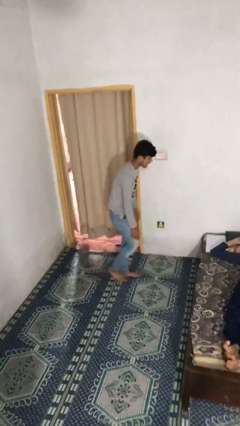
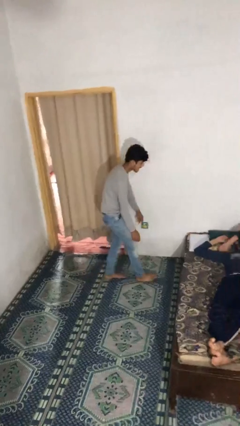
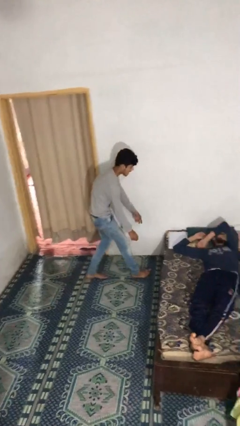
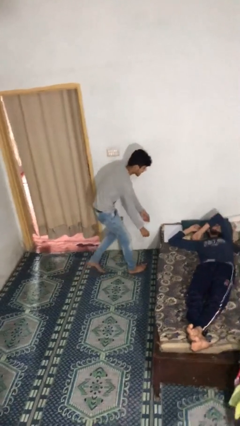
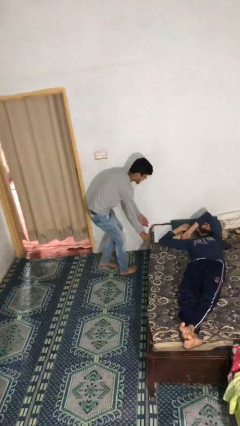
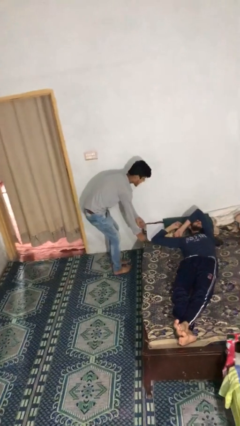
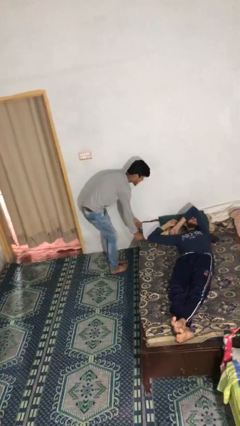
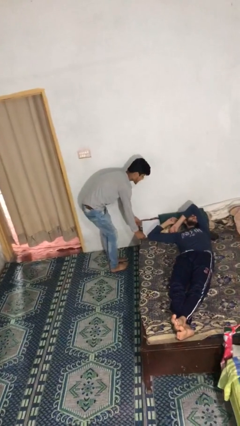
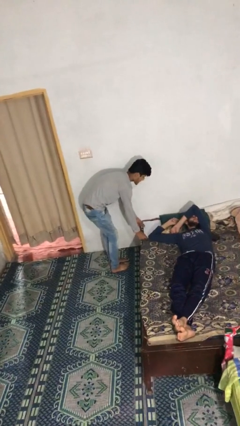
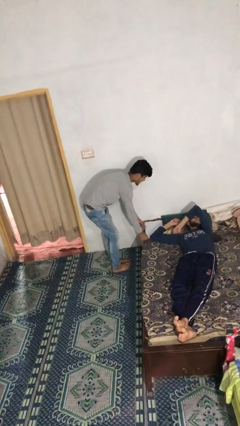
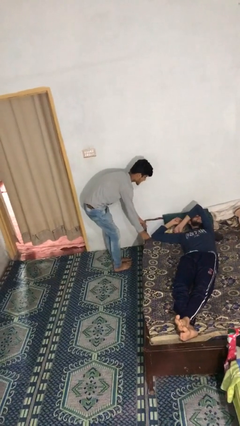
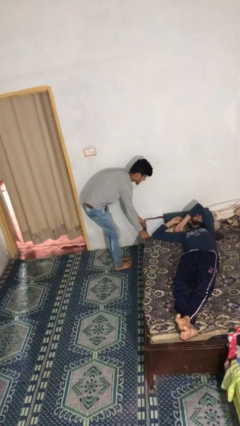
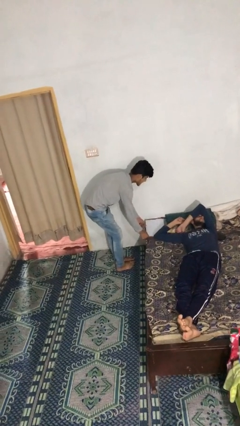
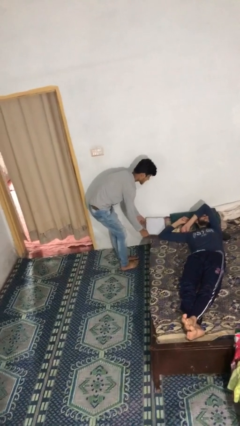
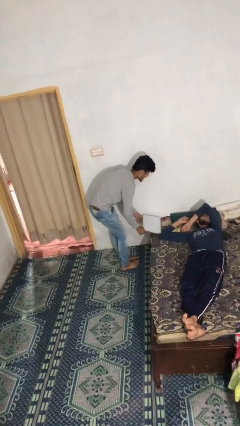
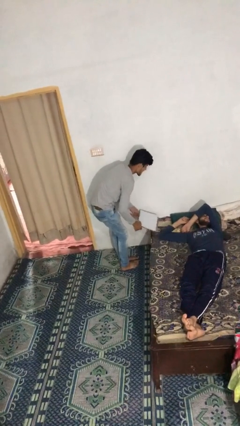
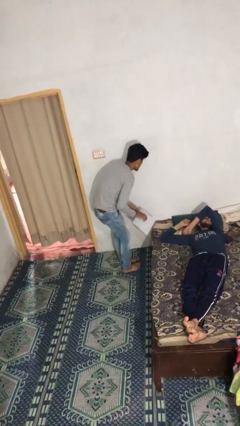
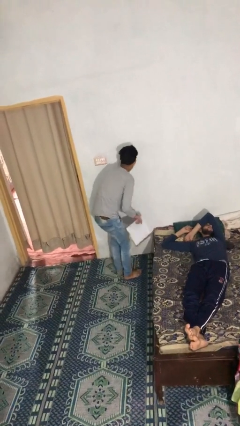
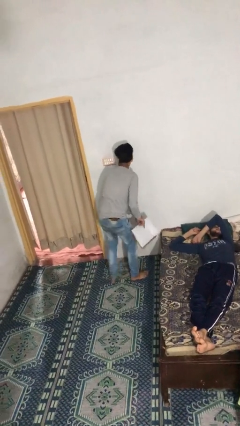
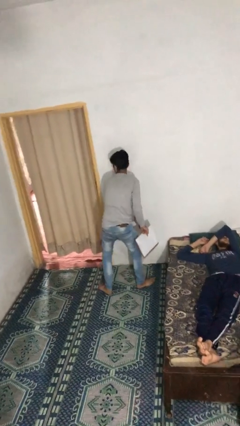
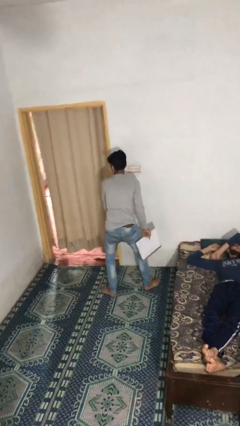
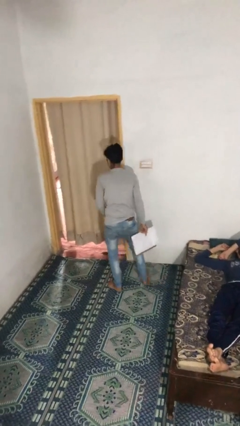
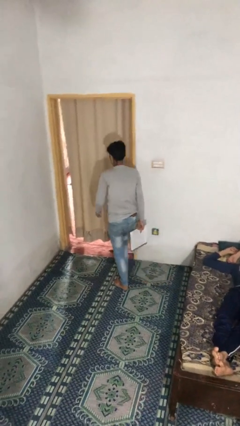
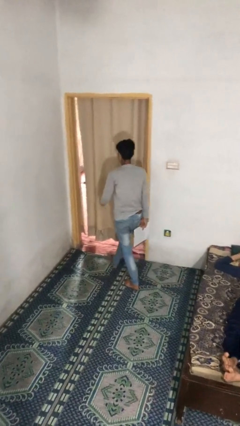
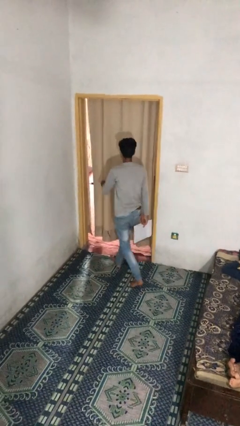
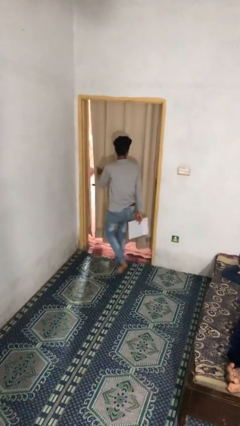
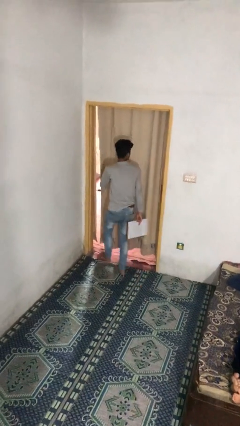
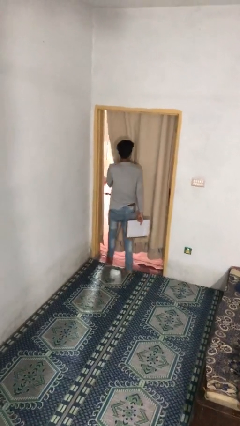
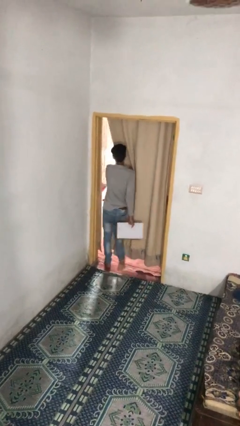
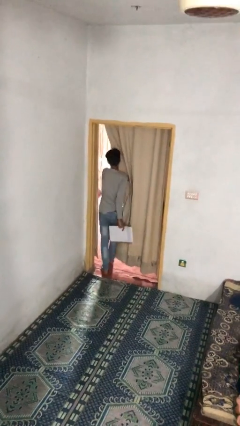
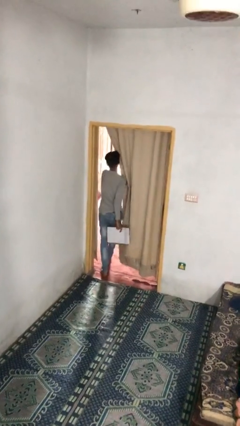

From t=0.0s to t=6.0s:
person steals object from person

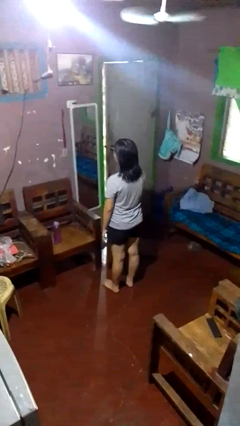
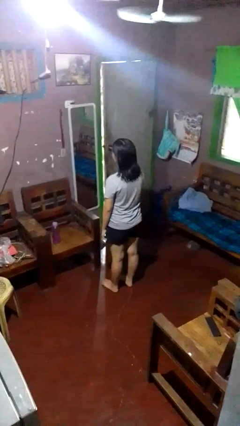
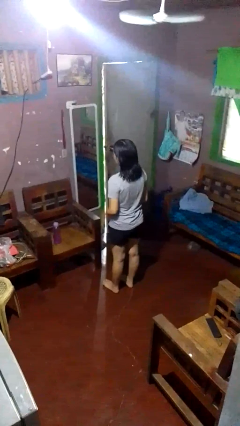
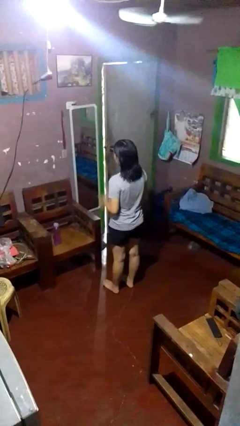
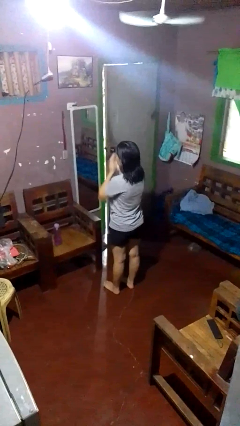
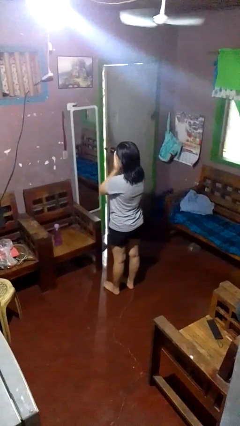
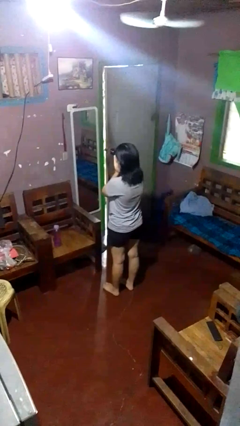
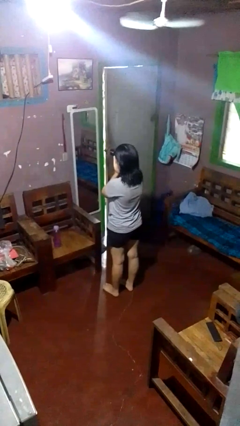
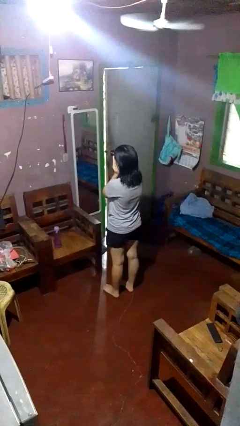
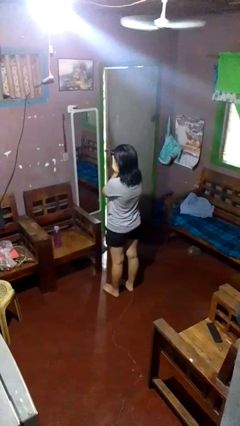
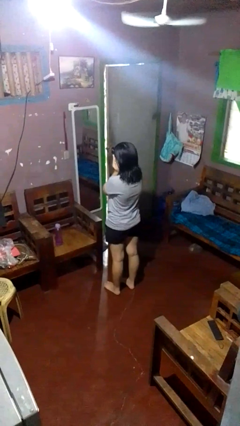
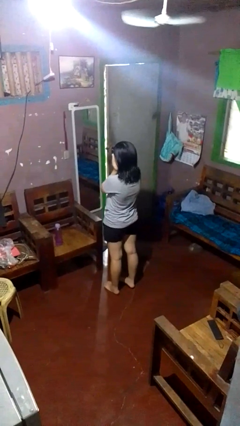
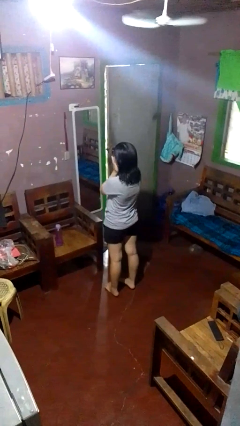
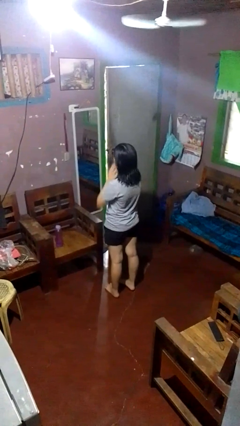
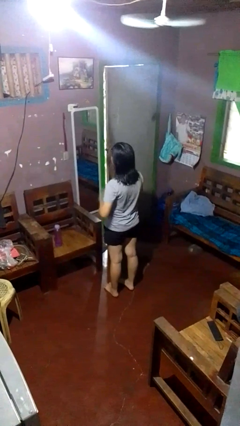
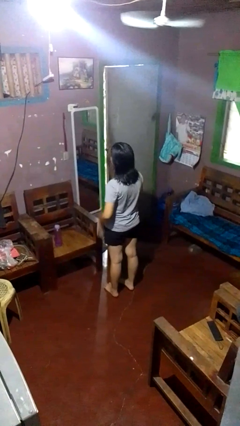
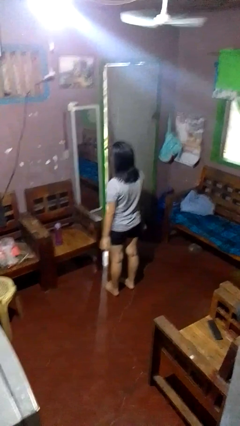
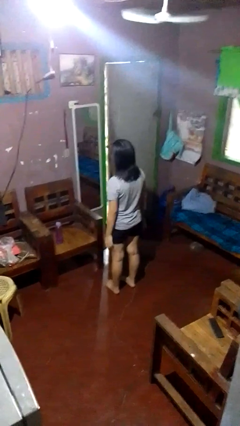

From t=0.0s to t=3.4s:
person covers face with hands

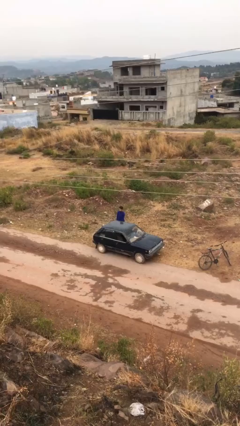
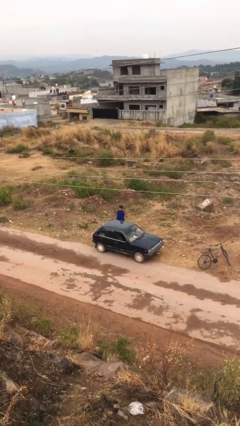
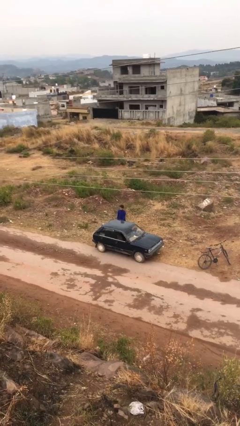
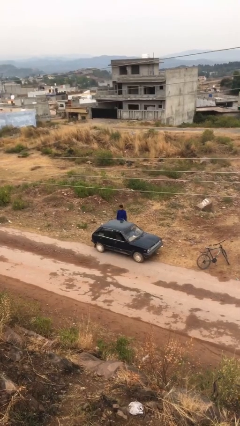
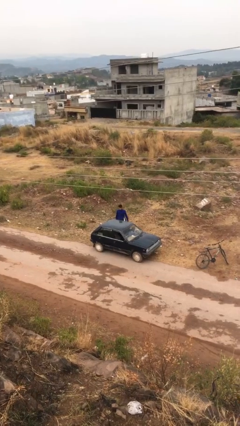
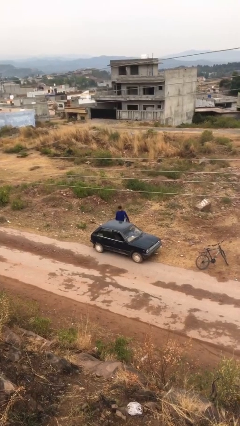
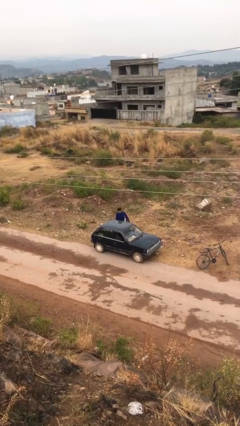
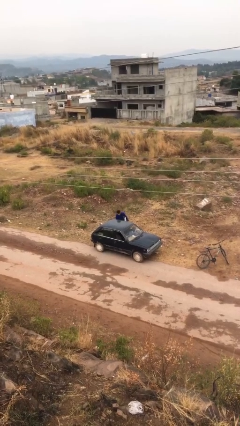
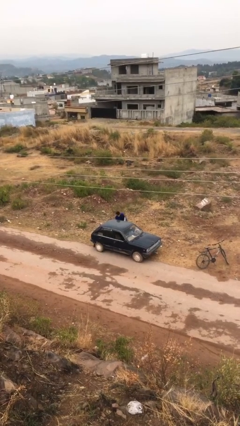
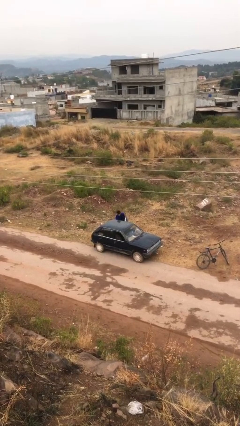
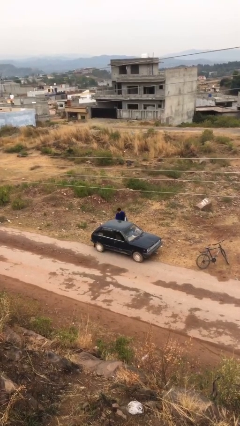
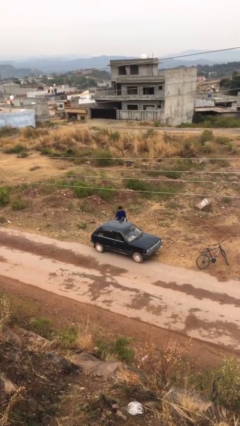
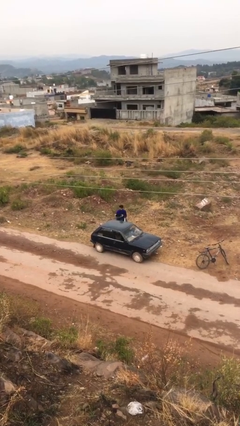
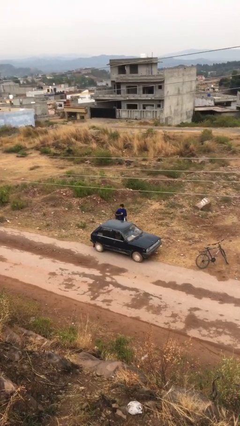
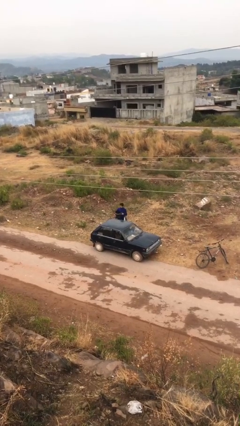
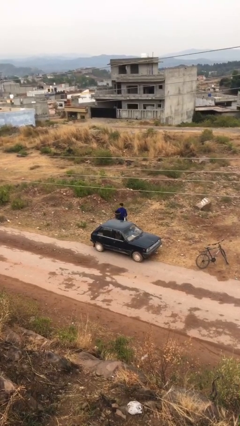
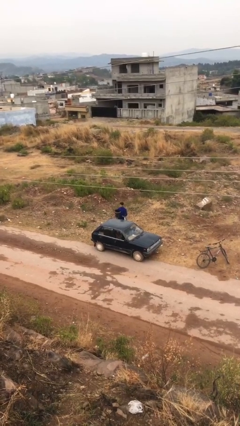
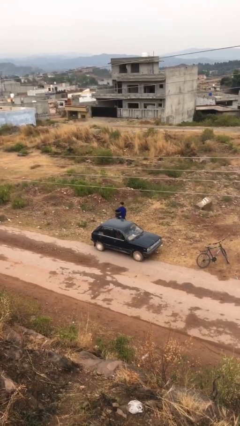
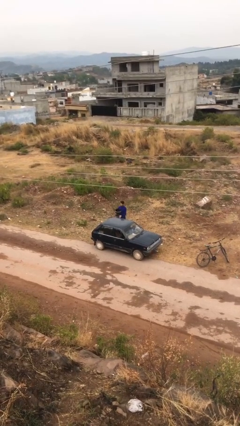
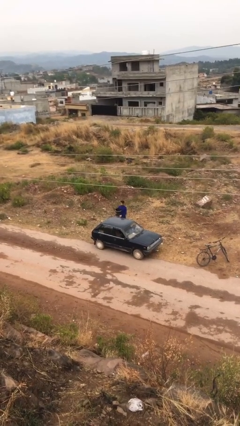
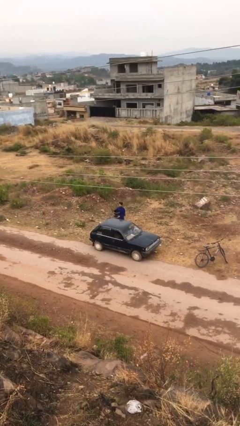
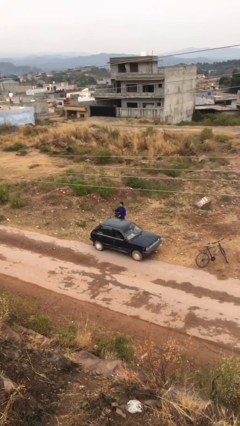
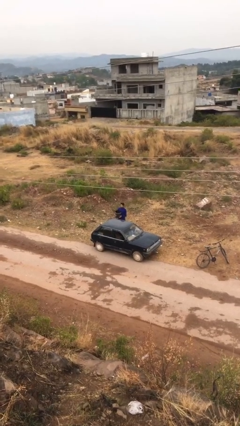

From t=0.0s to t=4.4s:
person unloads car

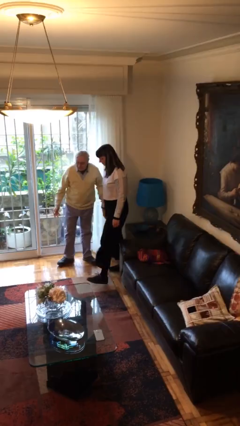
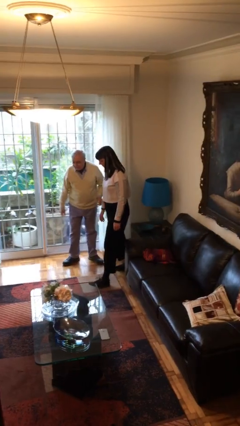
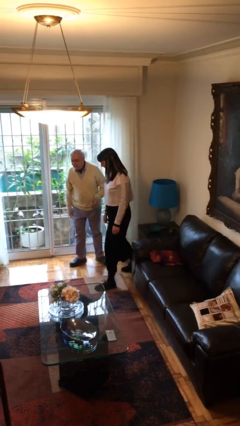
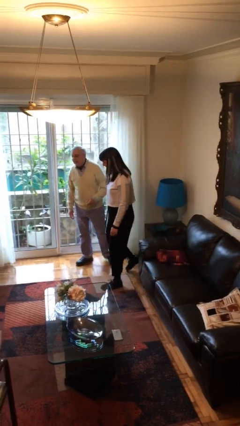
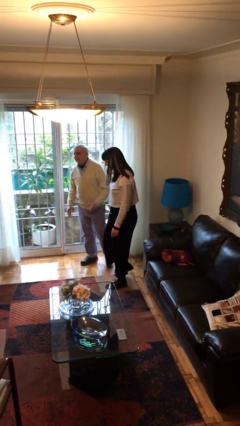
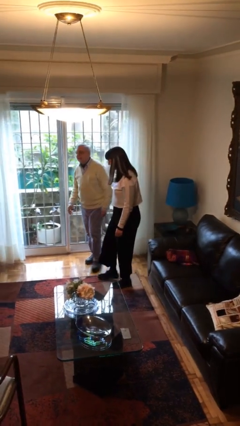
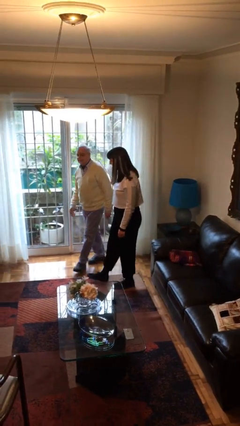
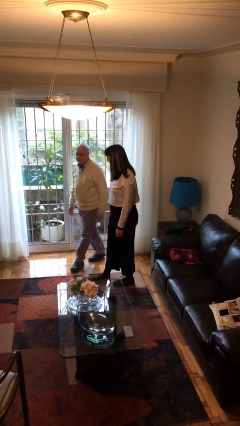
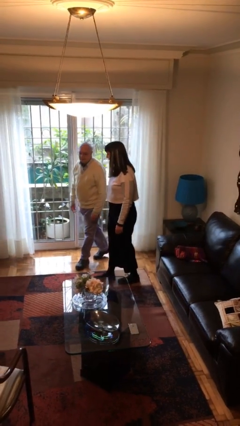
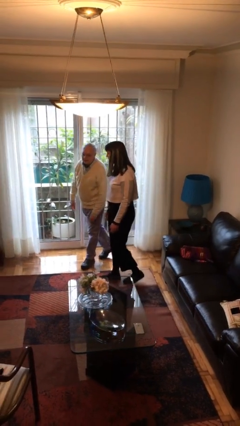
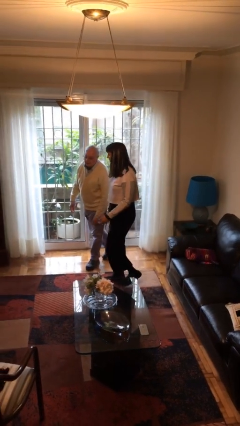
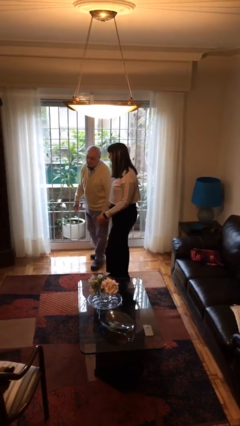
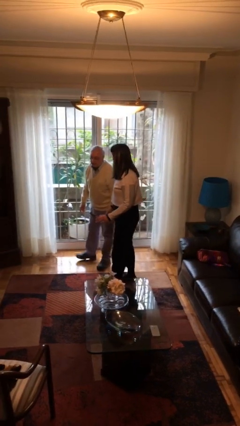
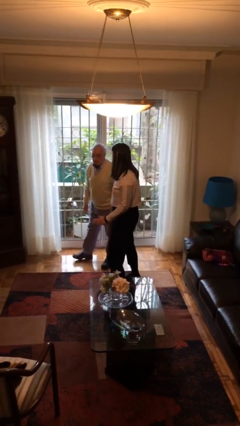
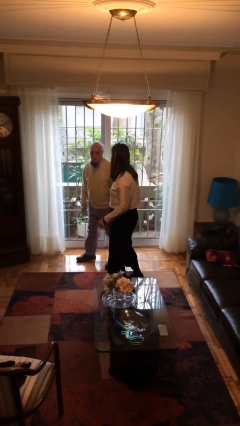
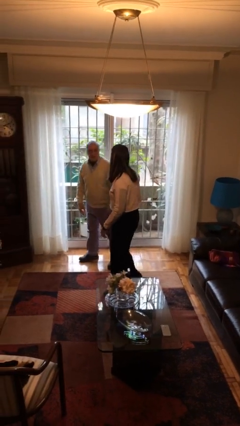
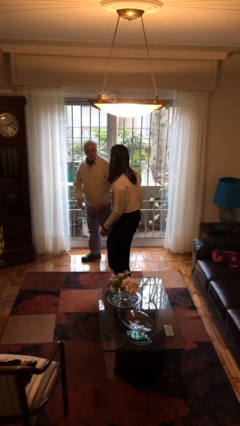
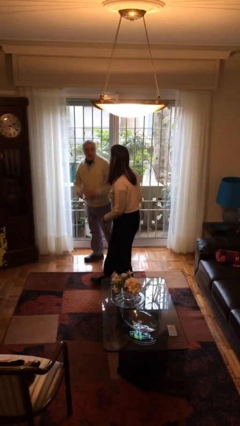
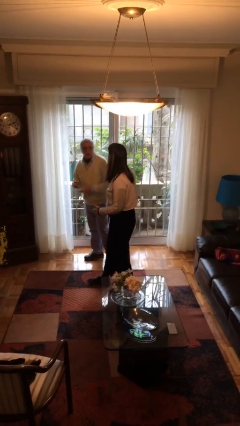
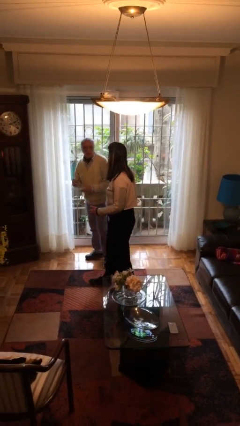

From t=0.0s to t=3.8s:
person talks to person
